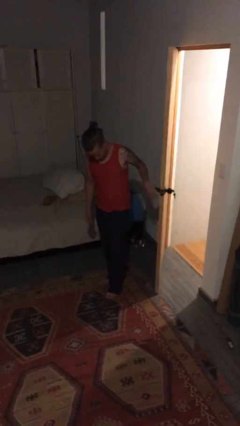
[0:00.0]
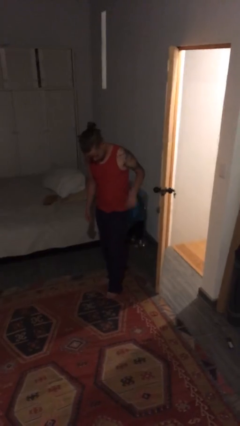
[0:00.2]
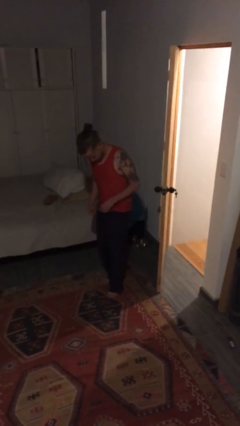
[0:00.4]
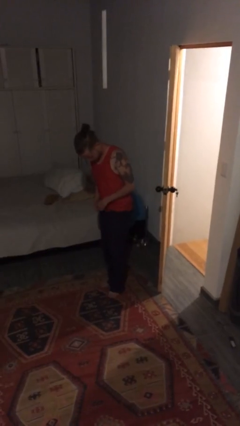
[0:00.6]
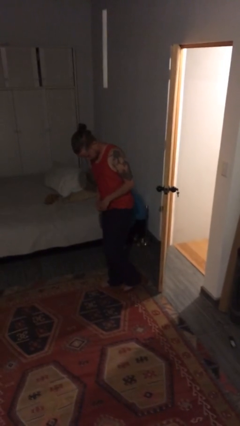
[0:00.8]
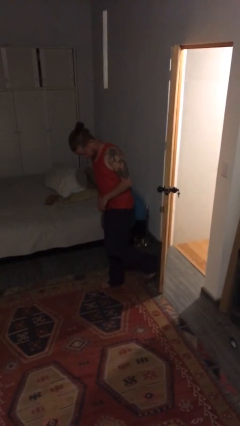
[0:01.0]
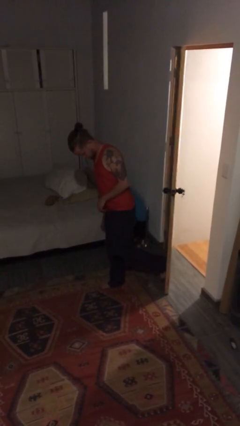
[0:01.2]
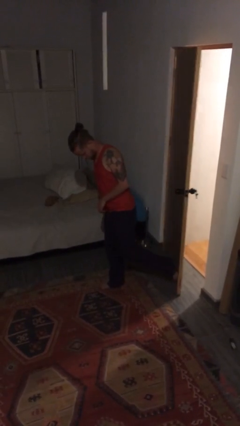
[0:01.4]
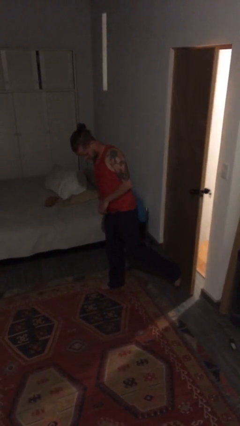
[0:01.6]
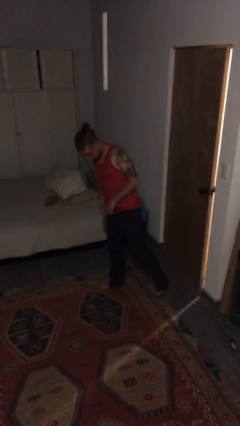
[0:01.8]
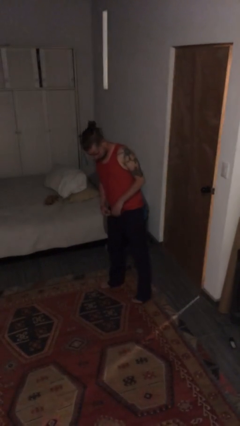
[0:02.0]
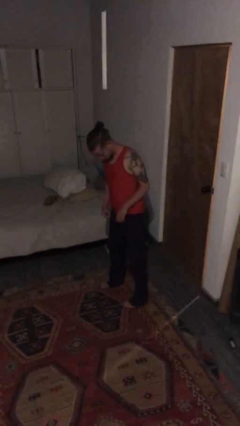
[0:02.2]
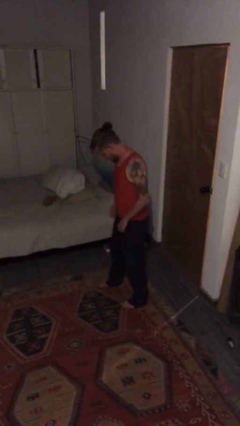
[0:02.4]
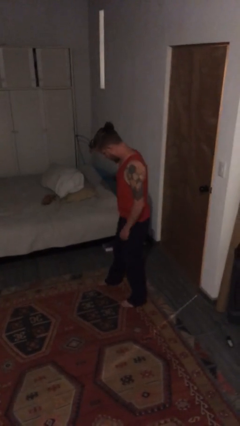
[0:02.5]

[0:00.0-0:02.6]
person closes door with foot

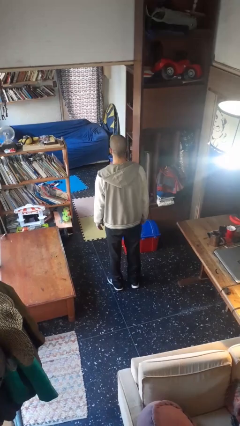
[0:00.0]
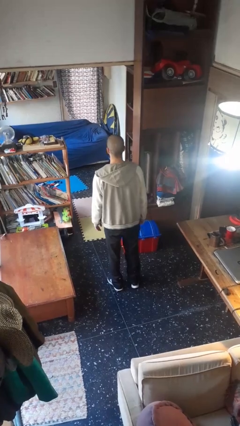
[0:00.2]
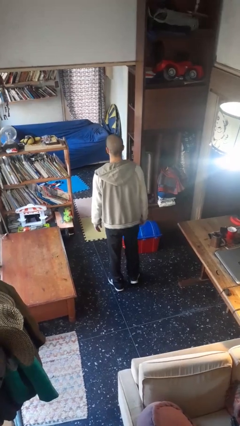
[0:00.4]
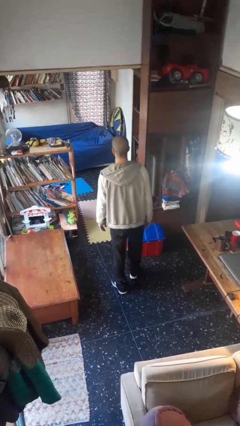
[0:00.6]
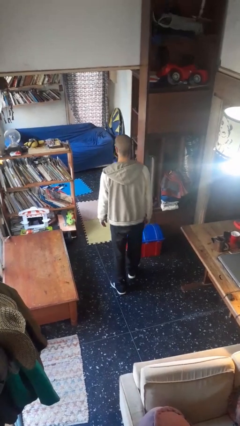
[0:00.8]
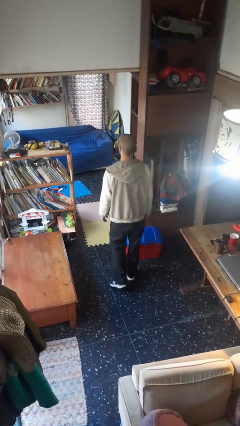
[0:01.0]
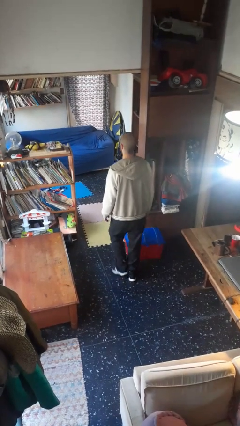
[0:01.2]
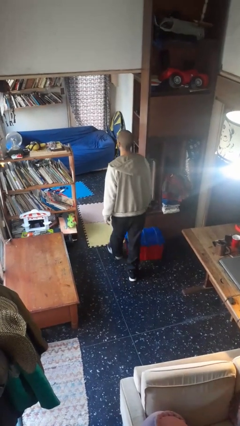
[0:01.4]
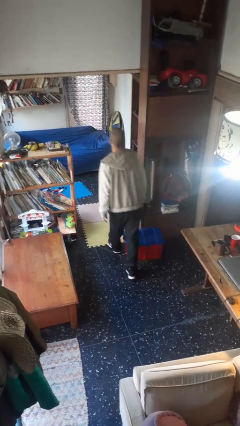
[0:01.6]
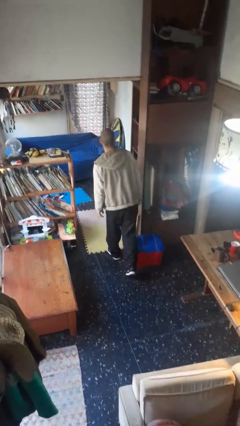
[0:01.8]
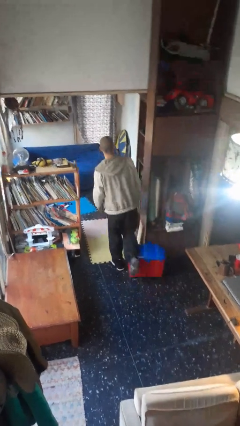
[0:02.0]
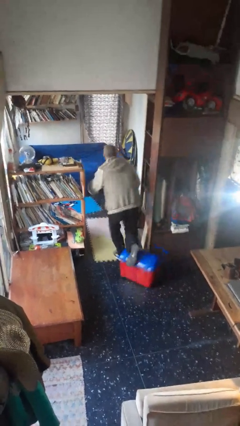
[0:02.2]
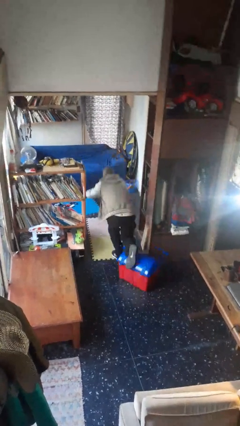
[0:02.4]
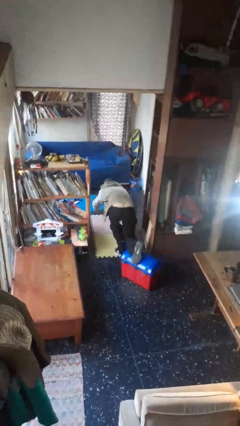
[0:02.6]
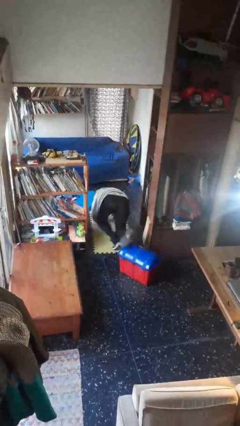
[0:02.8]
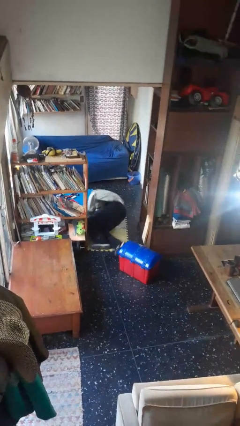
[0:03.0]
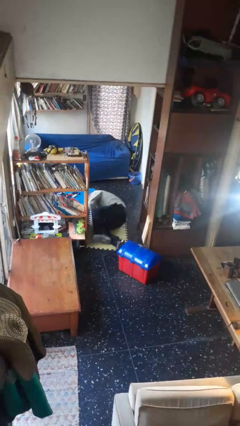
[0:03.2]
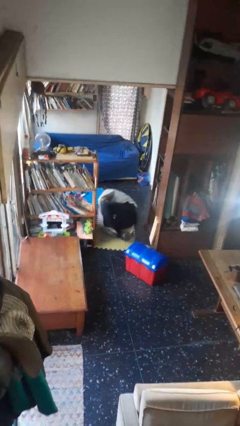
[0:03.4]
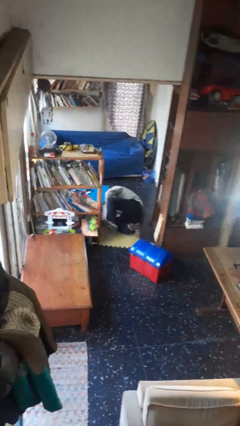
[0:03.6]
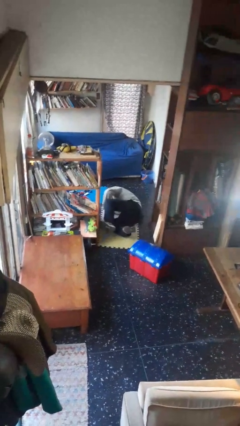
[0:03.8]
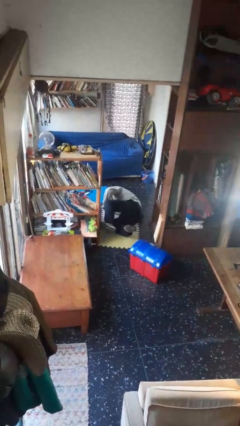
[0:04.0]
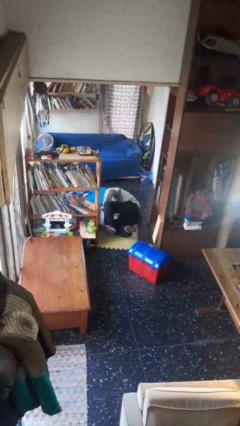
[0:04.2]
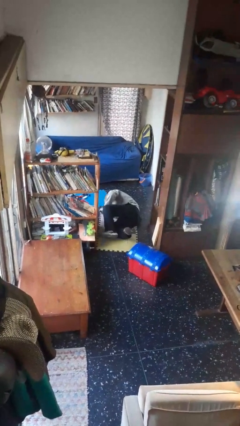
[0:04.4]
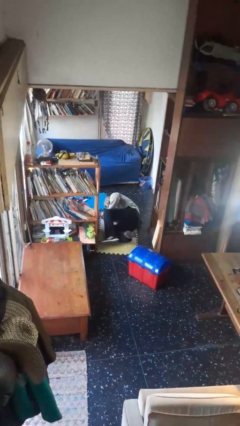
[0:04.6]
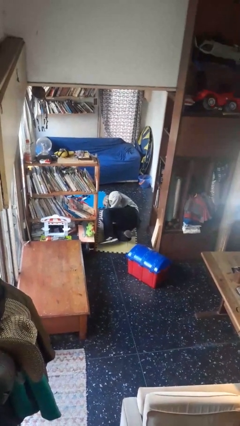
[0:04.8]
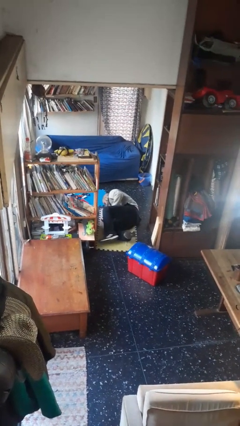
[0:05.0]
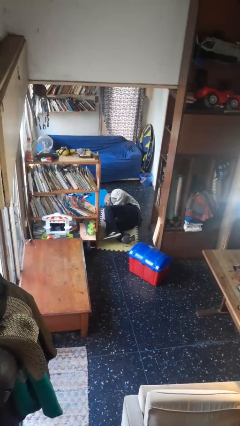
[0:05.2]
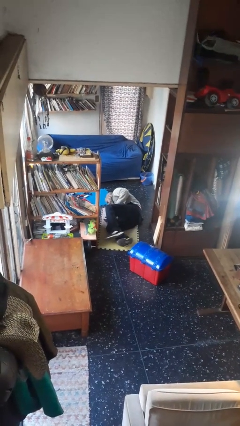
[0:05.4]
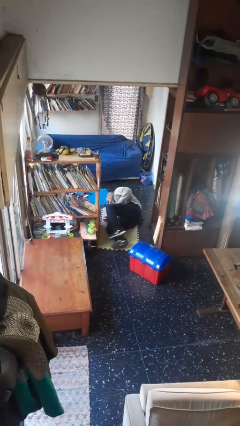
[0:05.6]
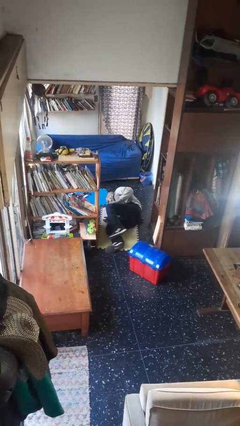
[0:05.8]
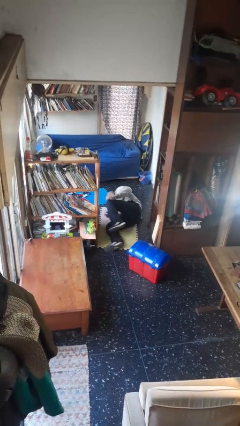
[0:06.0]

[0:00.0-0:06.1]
person trips on object on floor

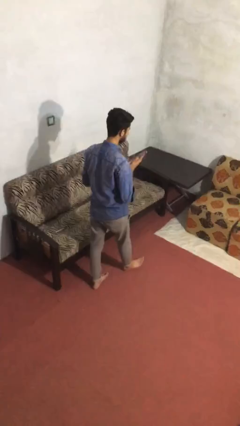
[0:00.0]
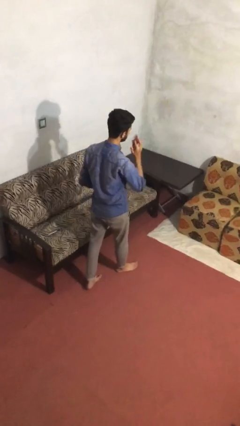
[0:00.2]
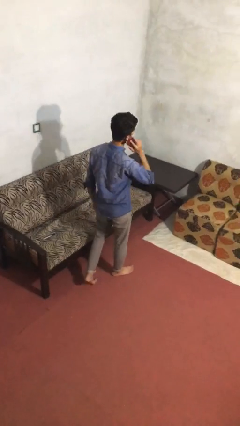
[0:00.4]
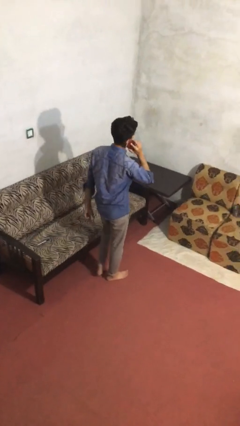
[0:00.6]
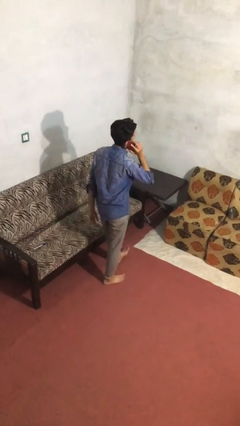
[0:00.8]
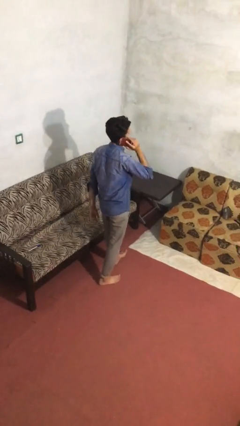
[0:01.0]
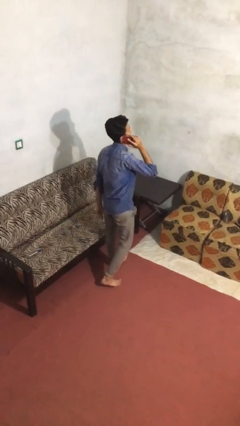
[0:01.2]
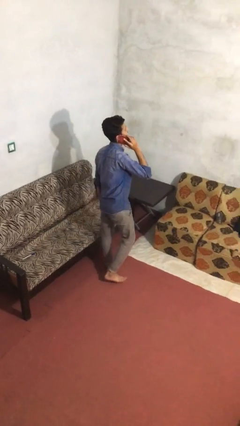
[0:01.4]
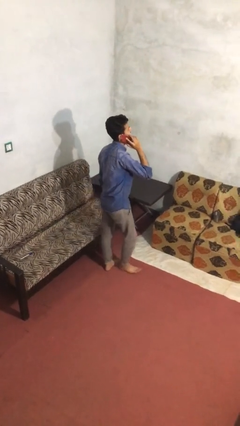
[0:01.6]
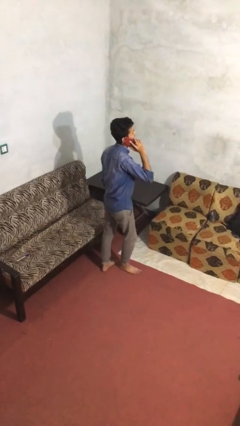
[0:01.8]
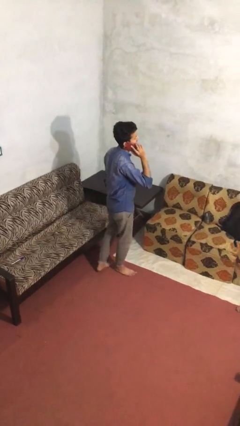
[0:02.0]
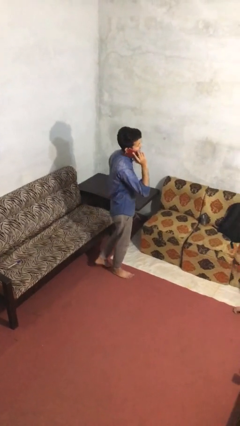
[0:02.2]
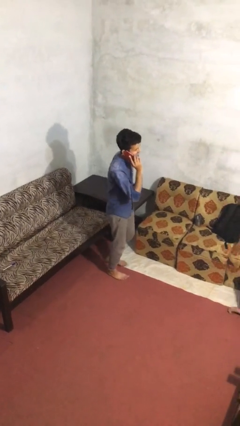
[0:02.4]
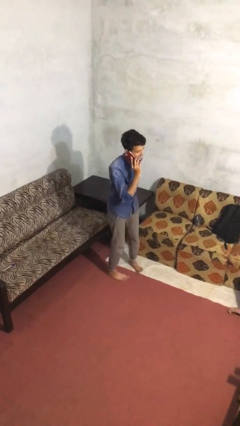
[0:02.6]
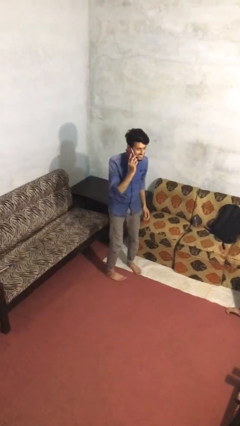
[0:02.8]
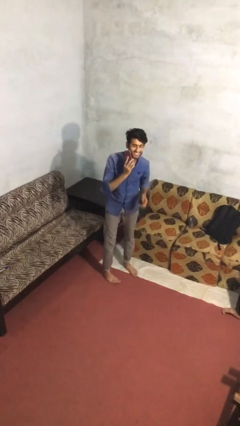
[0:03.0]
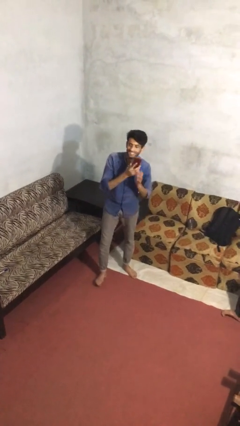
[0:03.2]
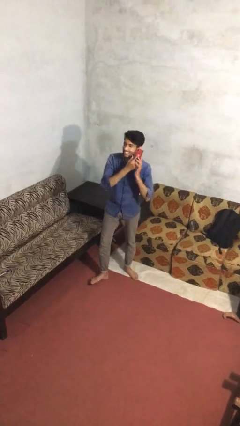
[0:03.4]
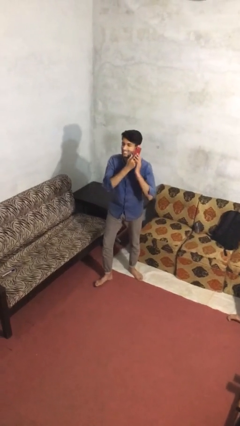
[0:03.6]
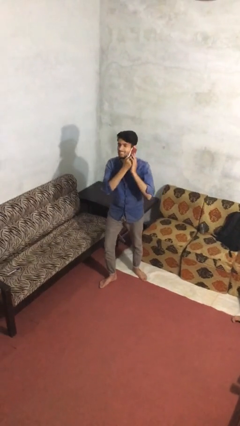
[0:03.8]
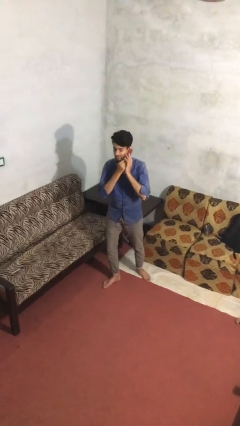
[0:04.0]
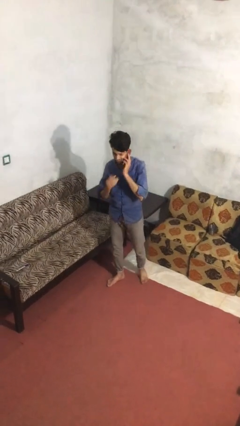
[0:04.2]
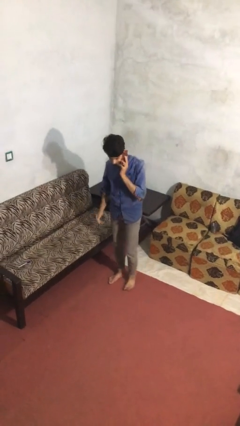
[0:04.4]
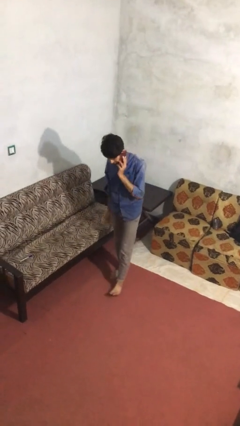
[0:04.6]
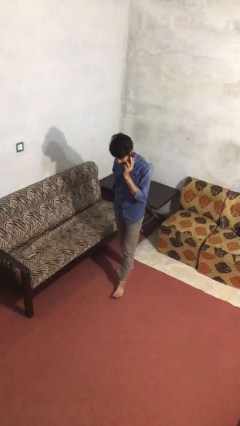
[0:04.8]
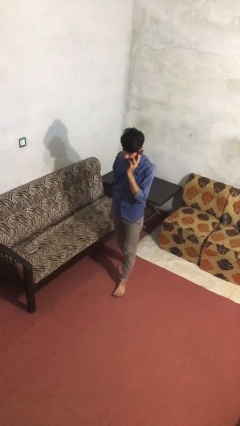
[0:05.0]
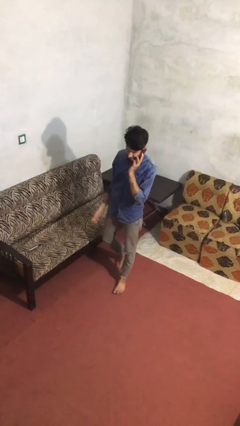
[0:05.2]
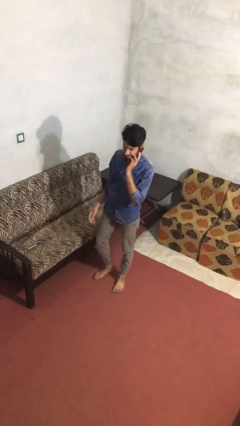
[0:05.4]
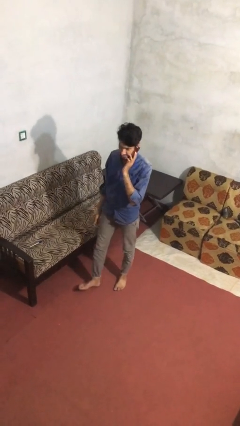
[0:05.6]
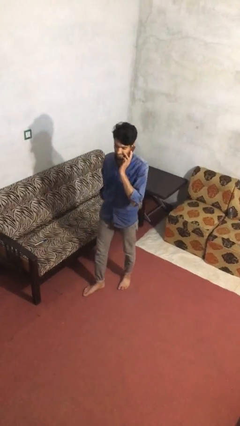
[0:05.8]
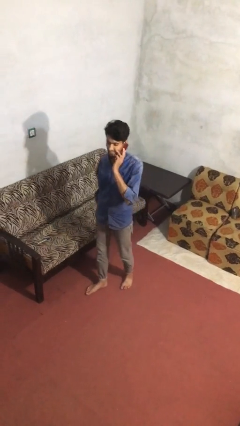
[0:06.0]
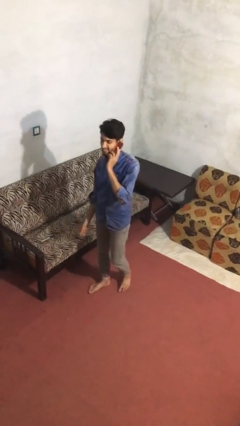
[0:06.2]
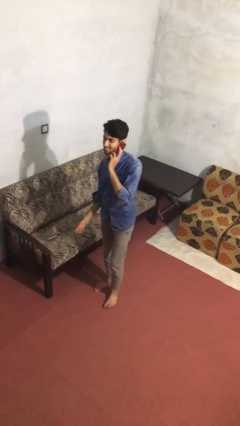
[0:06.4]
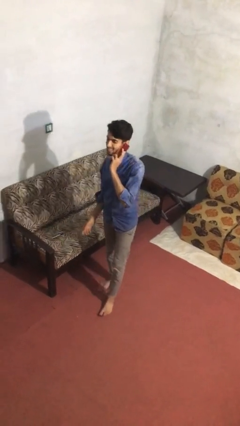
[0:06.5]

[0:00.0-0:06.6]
person talks on phone

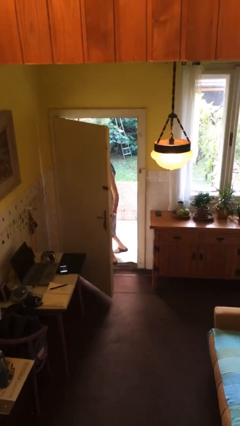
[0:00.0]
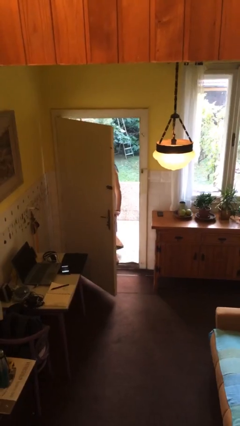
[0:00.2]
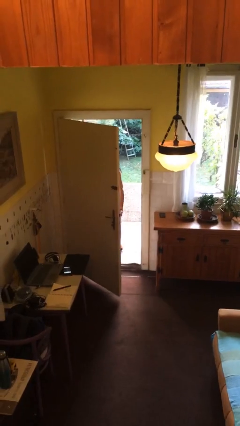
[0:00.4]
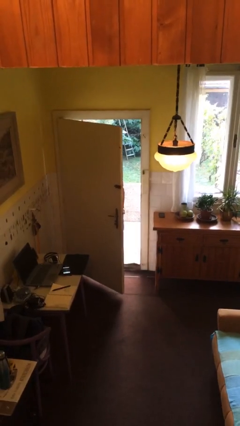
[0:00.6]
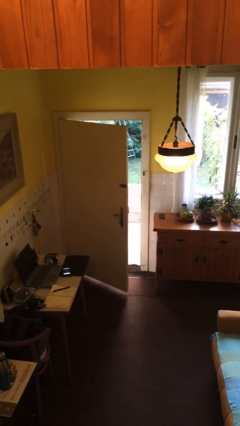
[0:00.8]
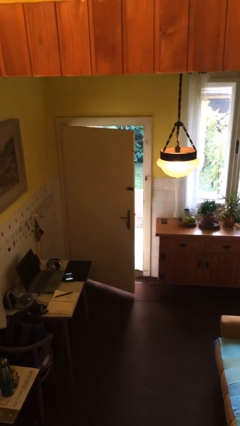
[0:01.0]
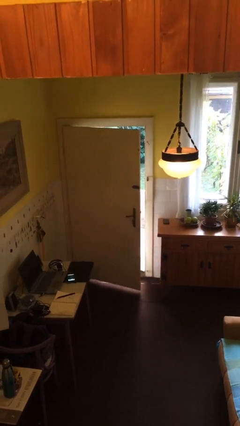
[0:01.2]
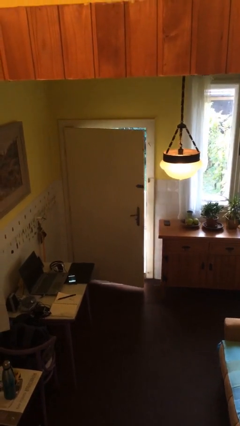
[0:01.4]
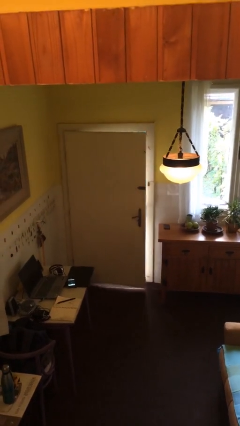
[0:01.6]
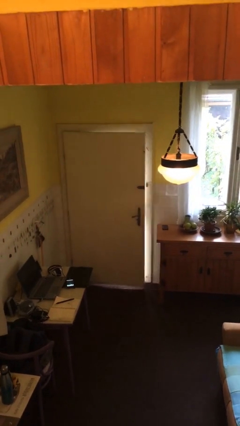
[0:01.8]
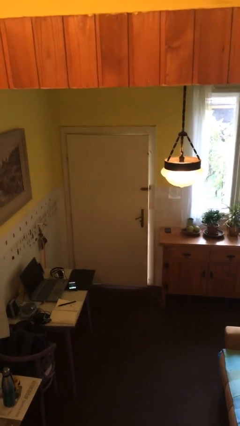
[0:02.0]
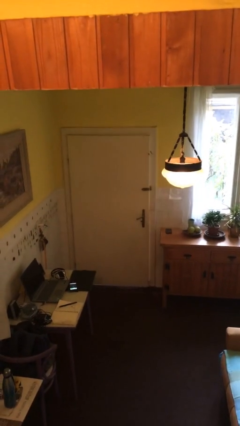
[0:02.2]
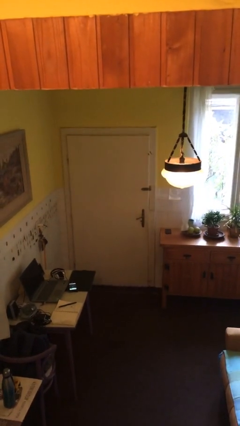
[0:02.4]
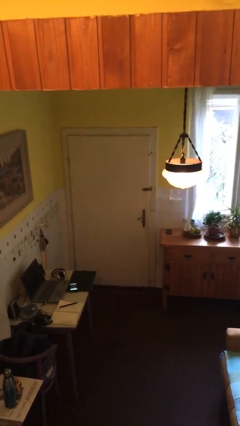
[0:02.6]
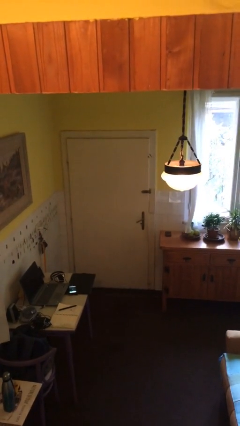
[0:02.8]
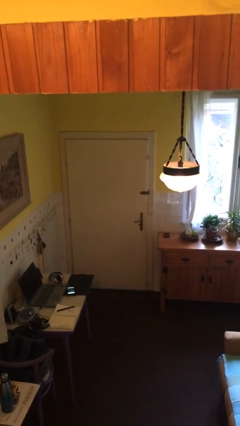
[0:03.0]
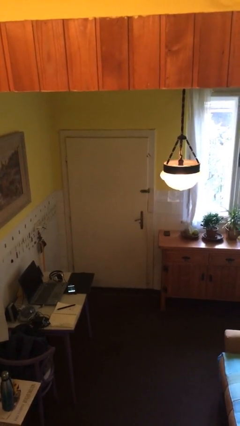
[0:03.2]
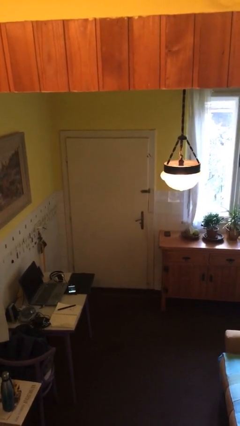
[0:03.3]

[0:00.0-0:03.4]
person closes facility door
